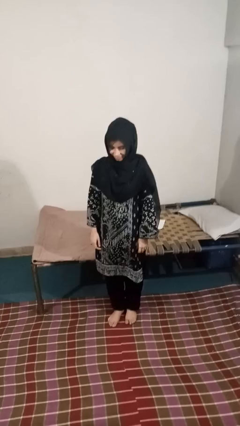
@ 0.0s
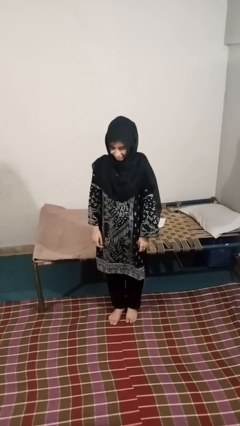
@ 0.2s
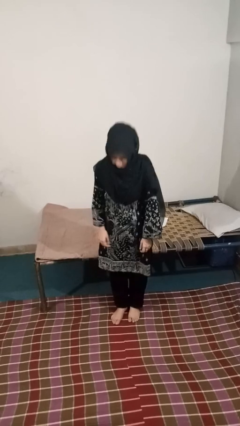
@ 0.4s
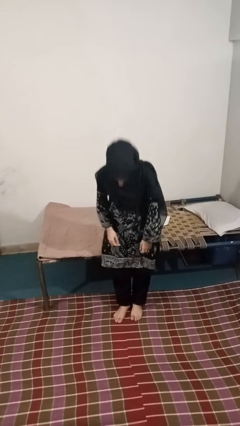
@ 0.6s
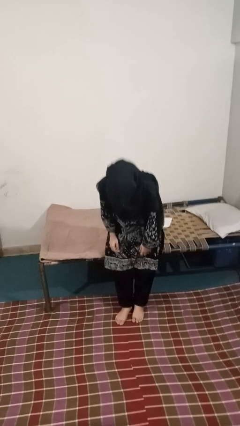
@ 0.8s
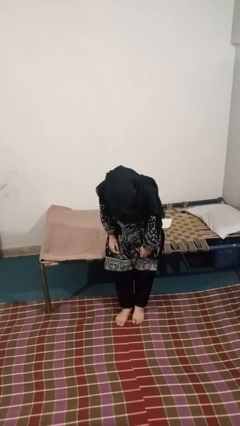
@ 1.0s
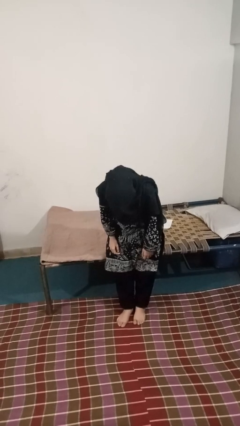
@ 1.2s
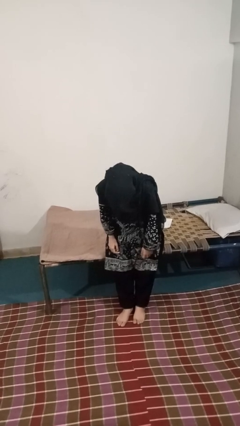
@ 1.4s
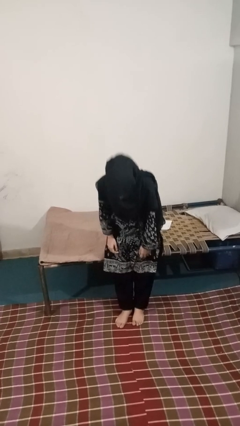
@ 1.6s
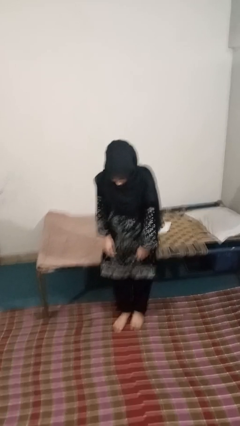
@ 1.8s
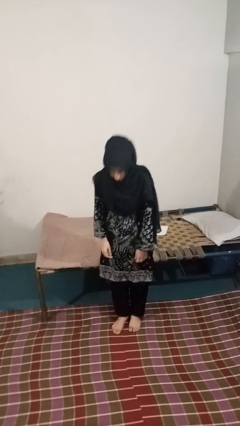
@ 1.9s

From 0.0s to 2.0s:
person bows

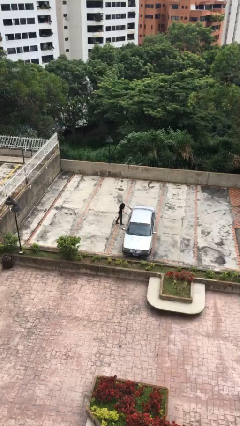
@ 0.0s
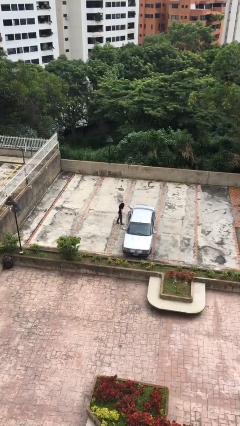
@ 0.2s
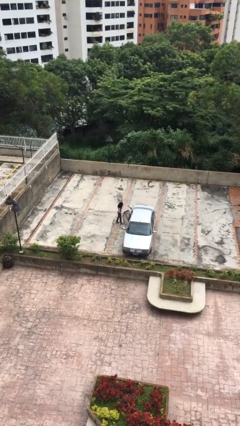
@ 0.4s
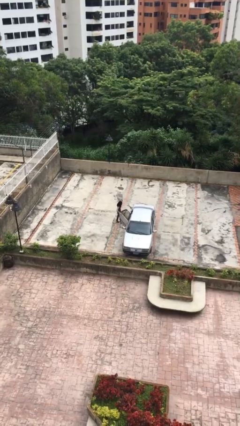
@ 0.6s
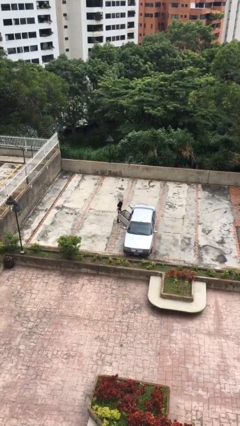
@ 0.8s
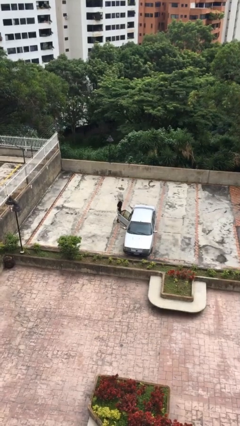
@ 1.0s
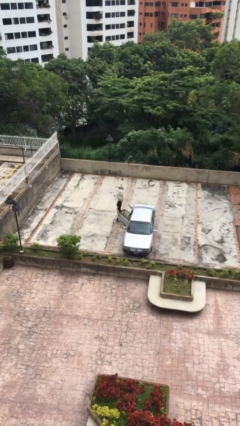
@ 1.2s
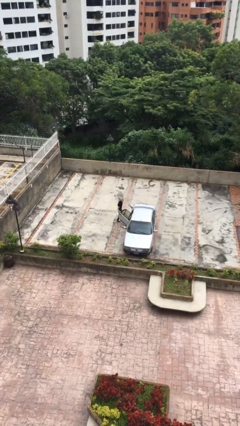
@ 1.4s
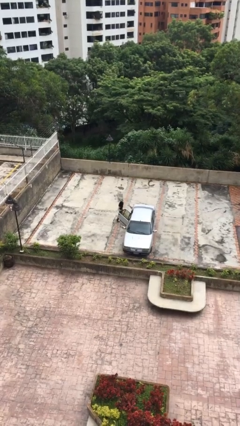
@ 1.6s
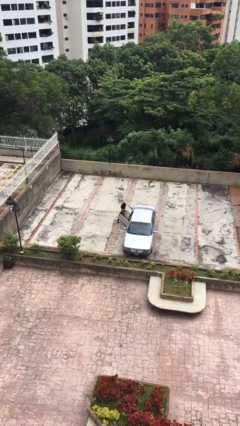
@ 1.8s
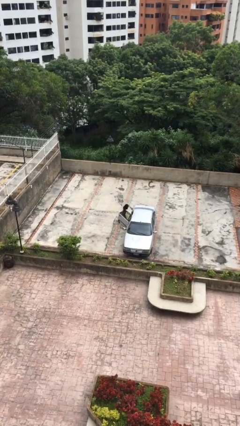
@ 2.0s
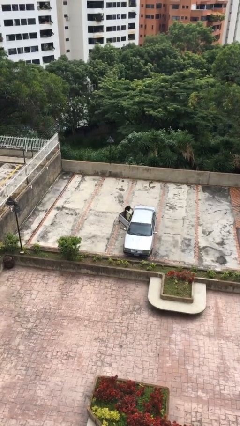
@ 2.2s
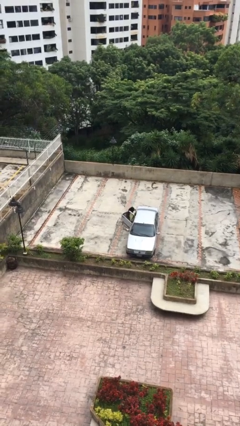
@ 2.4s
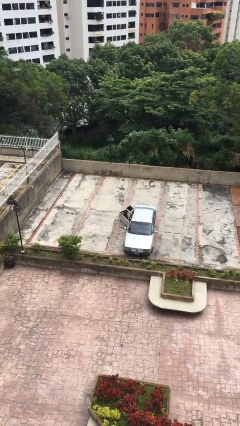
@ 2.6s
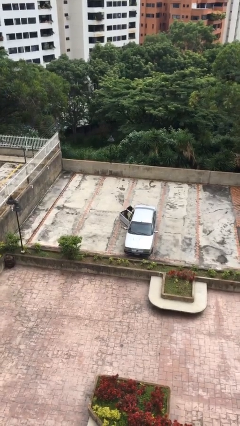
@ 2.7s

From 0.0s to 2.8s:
person opens car door

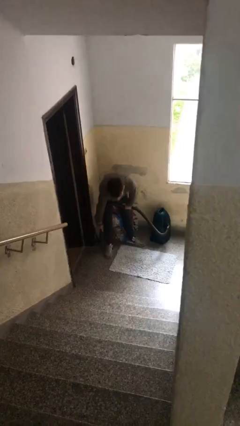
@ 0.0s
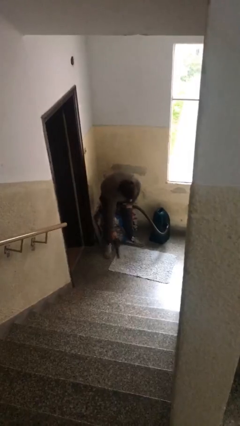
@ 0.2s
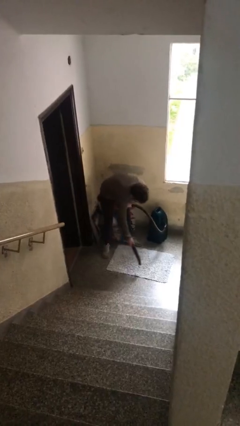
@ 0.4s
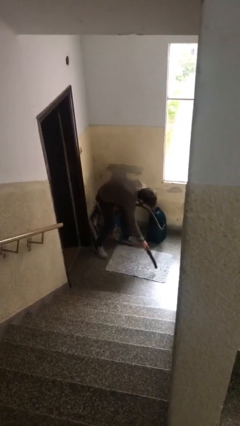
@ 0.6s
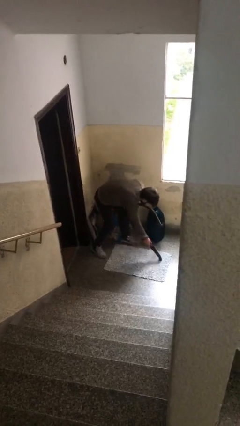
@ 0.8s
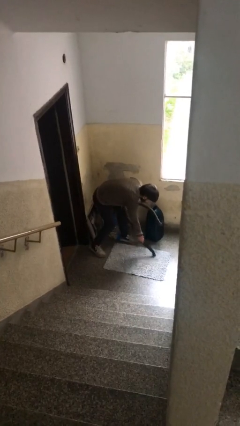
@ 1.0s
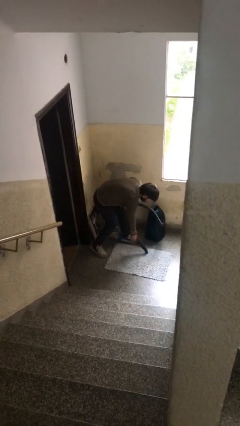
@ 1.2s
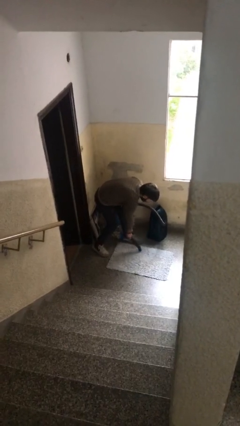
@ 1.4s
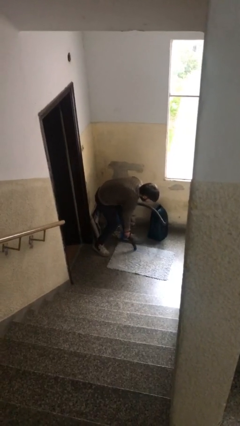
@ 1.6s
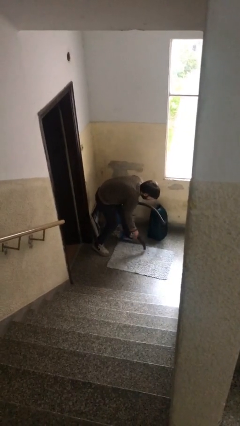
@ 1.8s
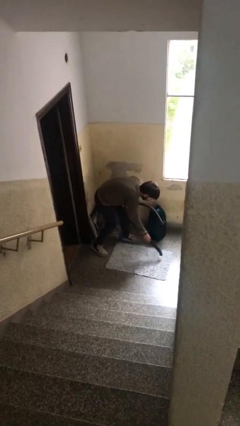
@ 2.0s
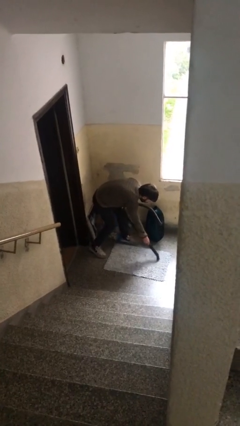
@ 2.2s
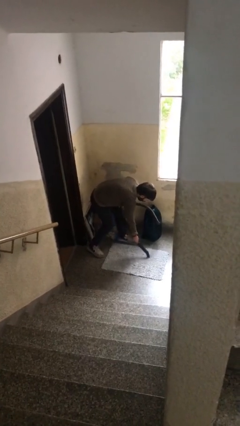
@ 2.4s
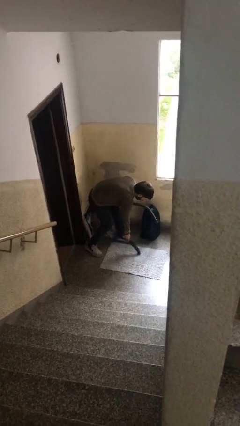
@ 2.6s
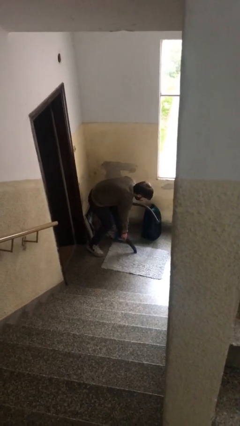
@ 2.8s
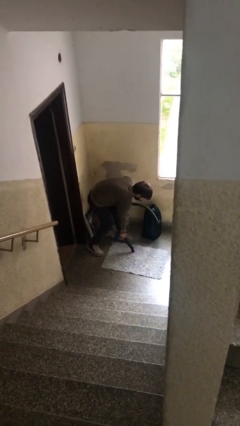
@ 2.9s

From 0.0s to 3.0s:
person vacuums carpet

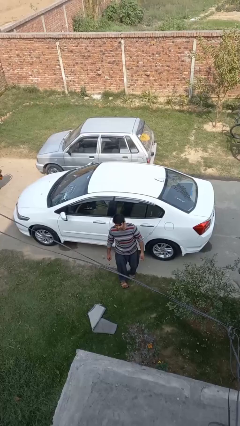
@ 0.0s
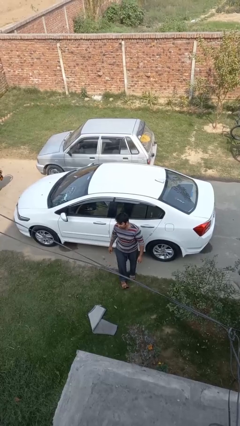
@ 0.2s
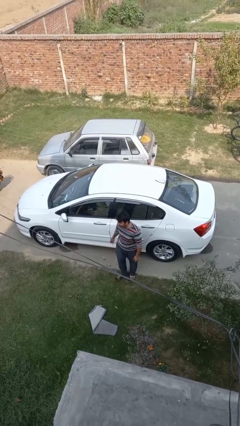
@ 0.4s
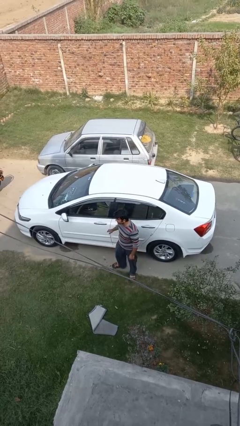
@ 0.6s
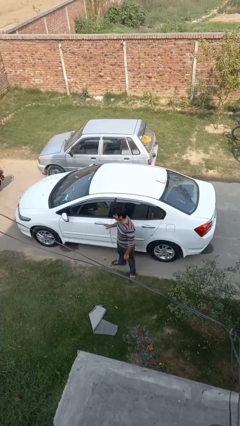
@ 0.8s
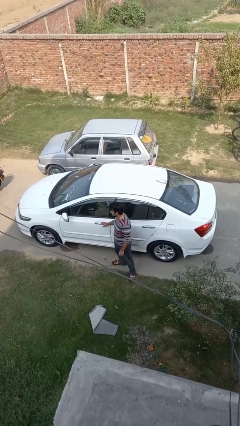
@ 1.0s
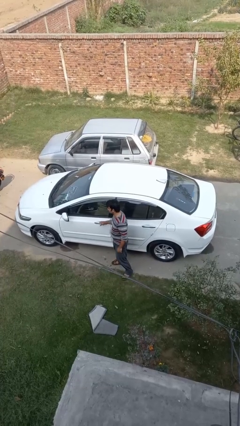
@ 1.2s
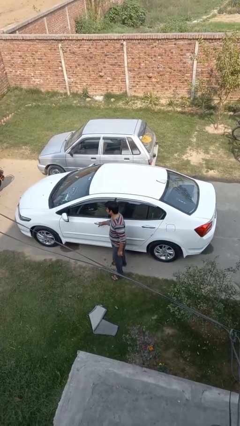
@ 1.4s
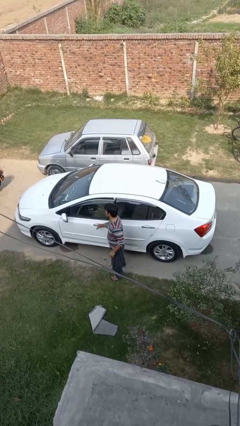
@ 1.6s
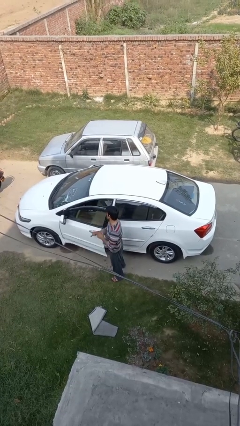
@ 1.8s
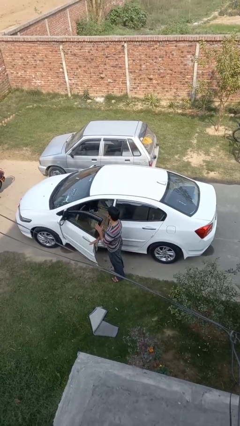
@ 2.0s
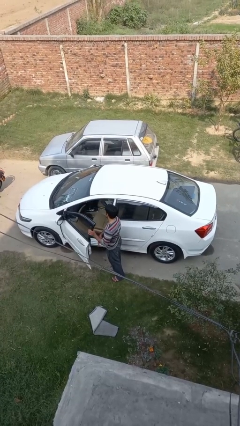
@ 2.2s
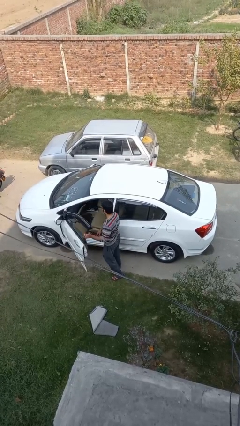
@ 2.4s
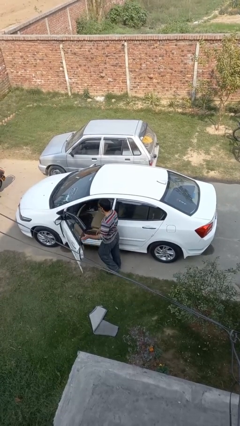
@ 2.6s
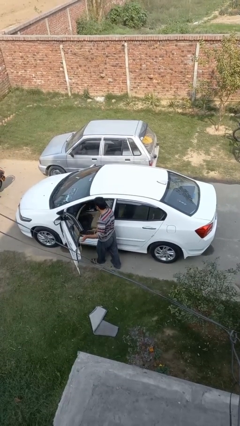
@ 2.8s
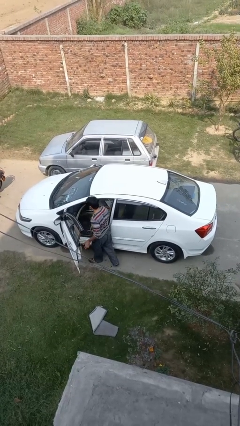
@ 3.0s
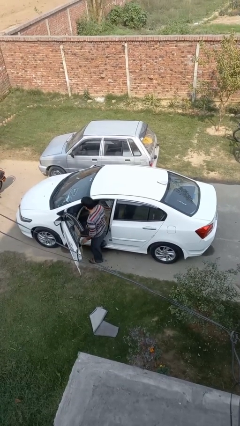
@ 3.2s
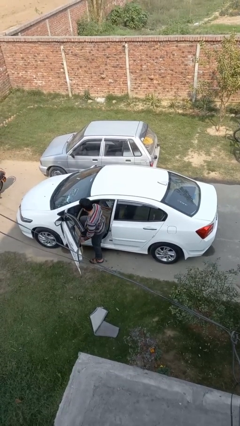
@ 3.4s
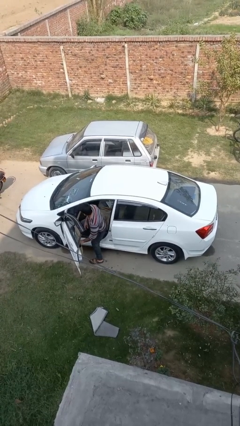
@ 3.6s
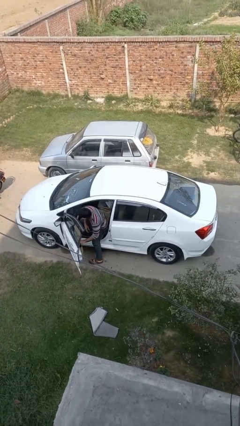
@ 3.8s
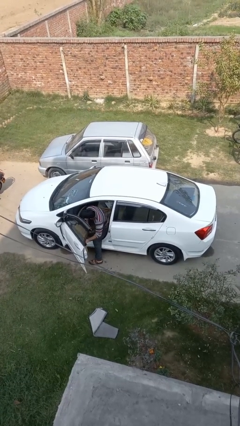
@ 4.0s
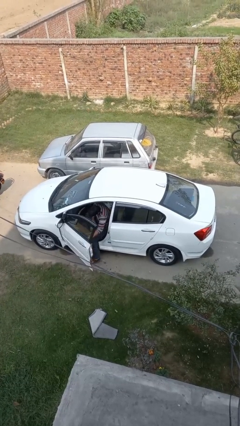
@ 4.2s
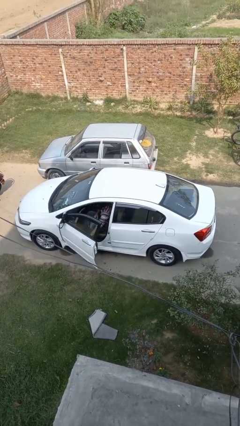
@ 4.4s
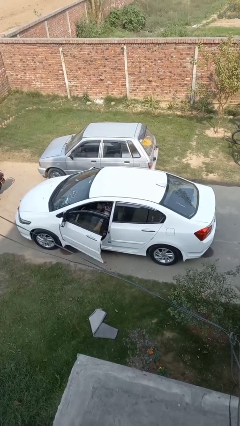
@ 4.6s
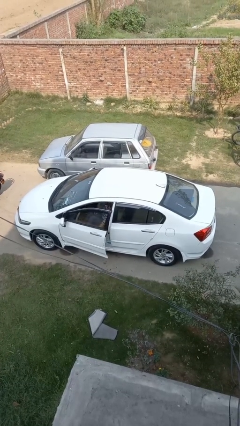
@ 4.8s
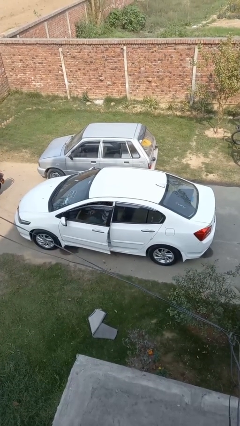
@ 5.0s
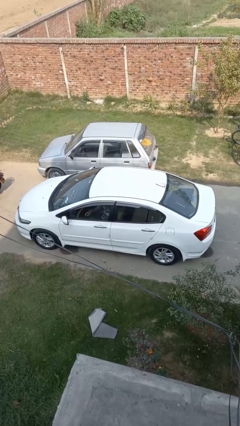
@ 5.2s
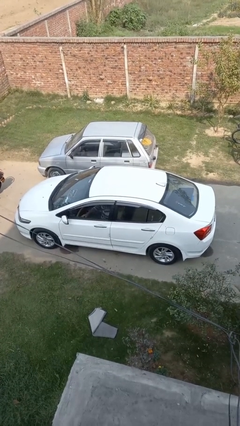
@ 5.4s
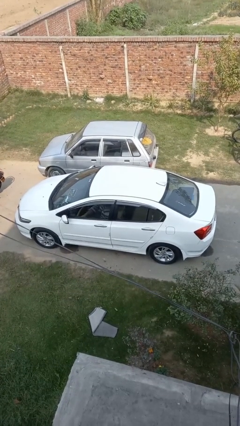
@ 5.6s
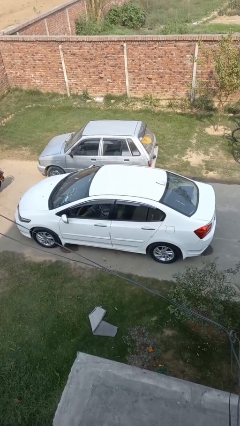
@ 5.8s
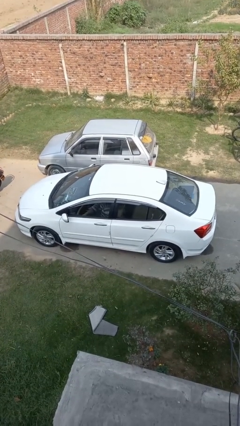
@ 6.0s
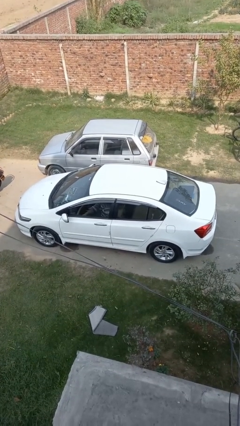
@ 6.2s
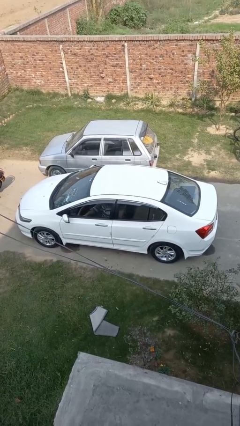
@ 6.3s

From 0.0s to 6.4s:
car picks up person

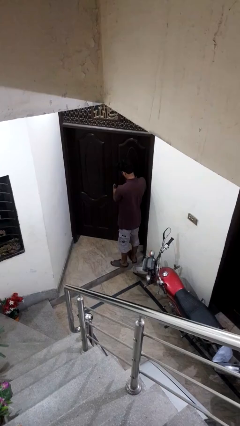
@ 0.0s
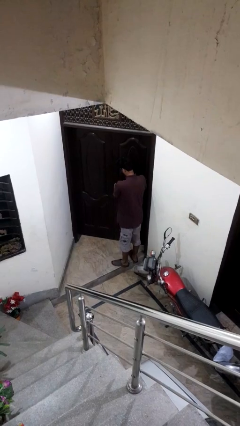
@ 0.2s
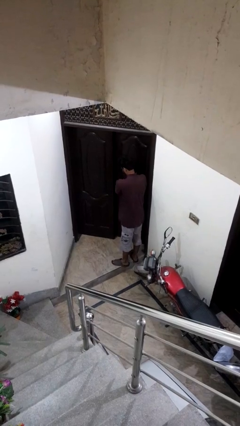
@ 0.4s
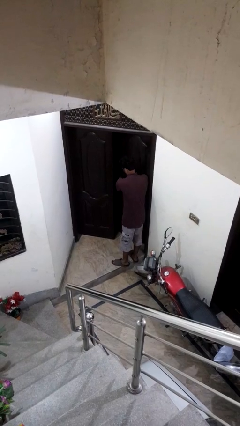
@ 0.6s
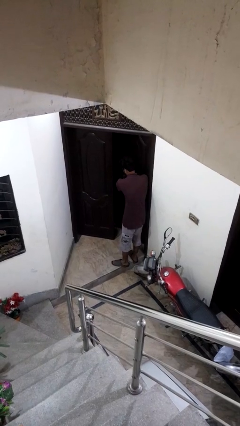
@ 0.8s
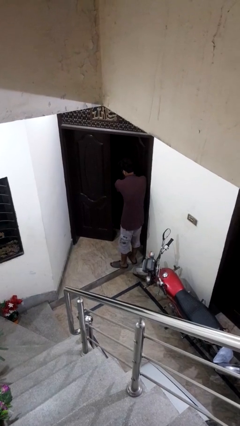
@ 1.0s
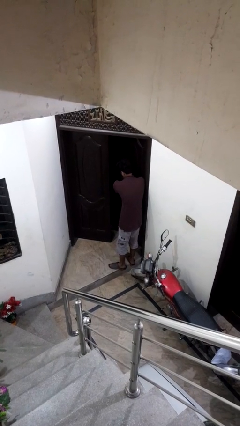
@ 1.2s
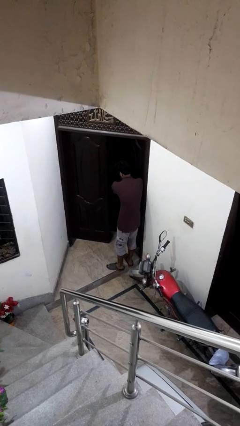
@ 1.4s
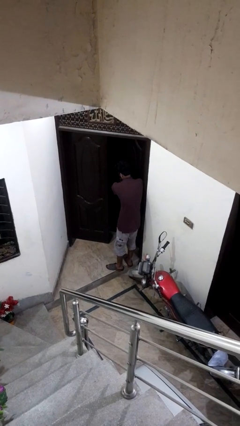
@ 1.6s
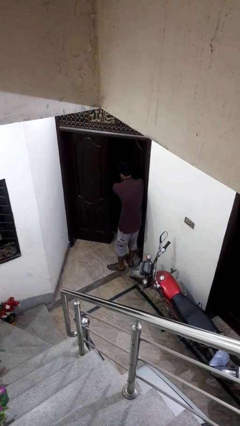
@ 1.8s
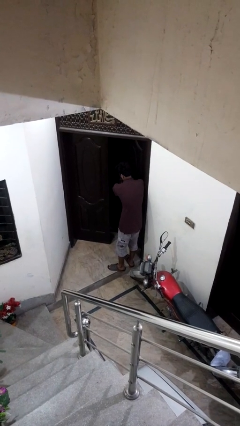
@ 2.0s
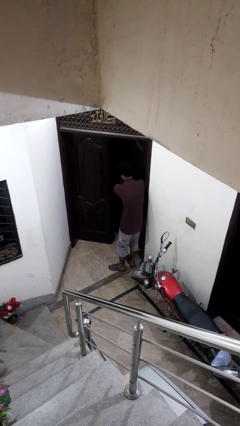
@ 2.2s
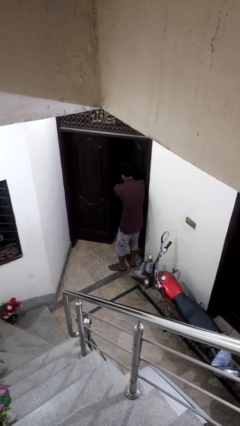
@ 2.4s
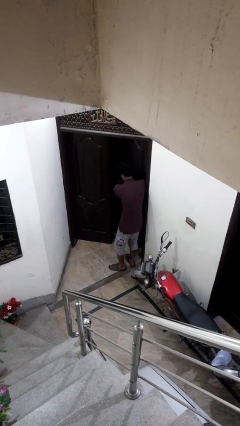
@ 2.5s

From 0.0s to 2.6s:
person opens facility door

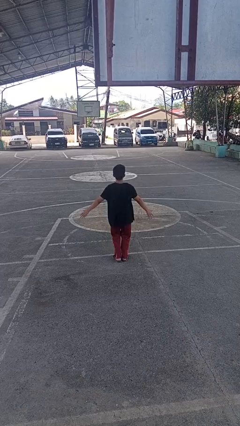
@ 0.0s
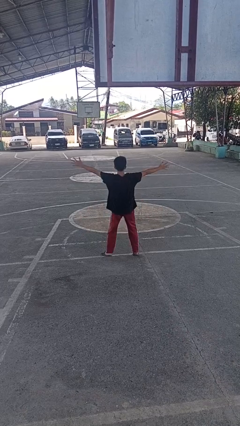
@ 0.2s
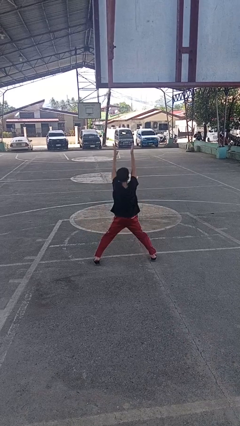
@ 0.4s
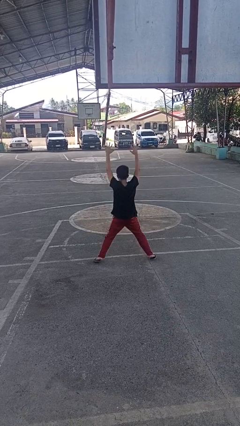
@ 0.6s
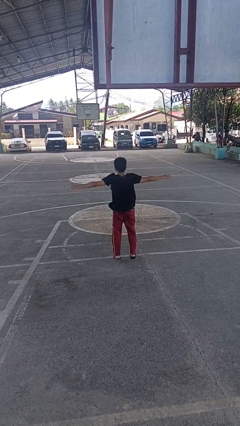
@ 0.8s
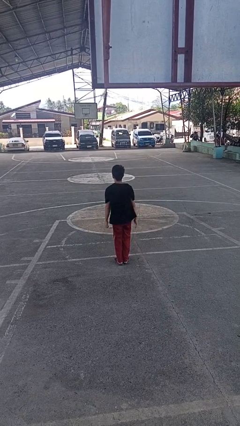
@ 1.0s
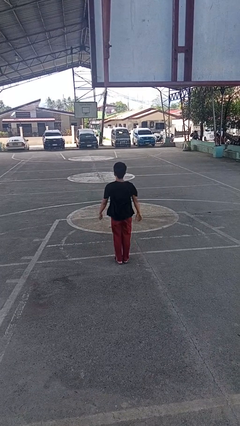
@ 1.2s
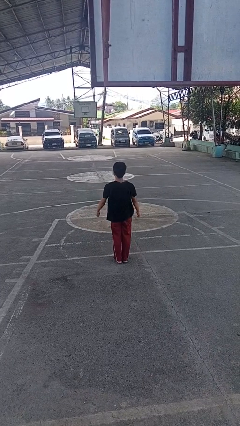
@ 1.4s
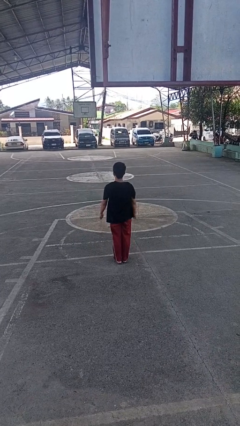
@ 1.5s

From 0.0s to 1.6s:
person exercises with jumping jacks
